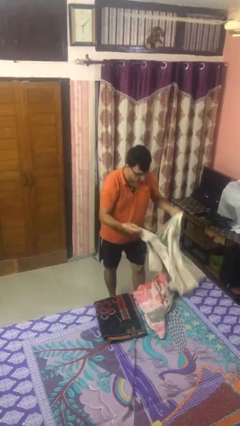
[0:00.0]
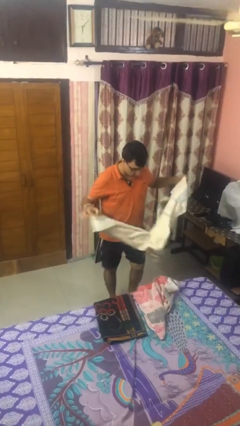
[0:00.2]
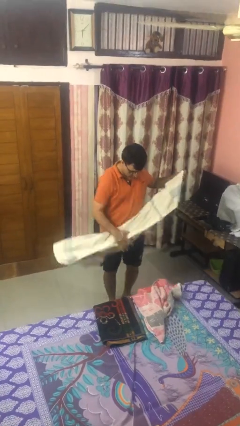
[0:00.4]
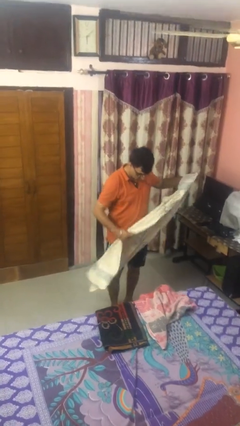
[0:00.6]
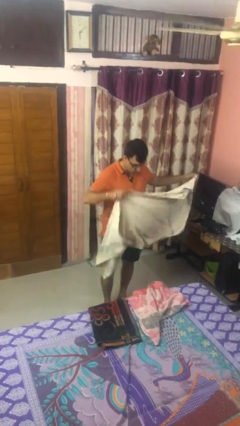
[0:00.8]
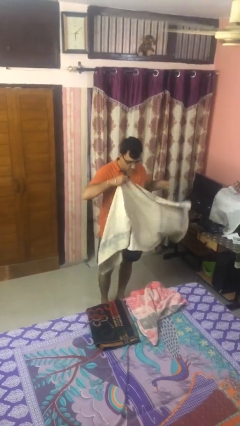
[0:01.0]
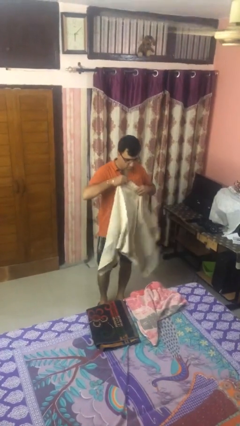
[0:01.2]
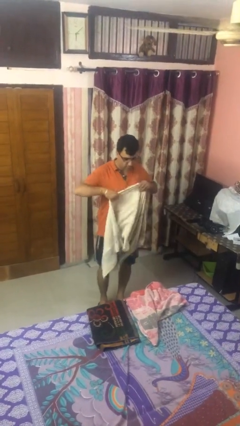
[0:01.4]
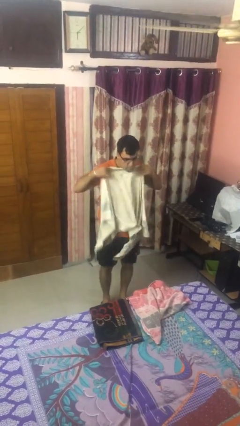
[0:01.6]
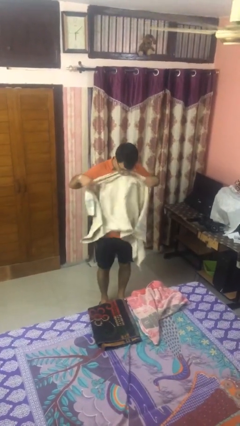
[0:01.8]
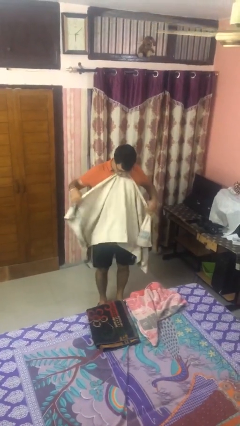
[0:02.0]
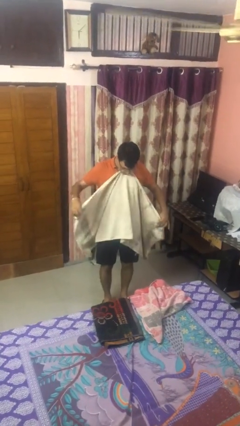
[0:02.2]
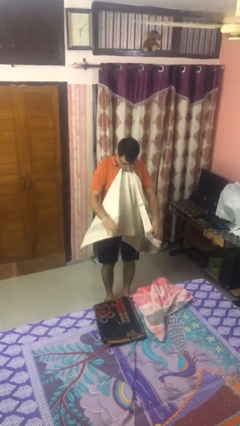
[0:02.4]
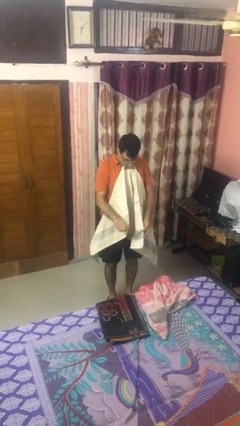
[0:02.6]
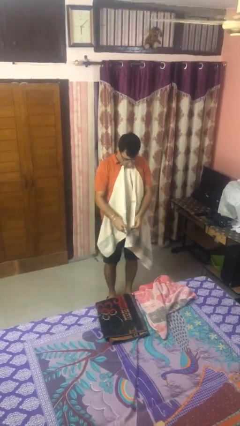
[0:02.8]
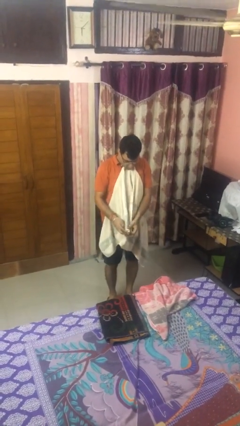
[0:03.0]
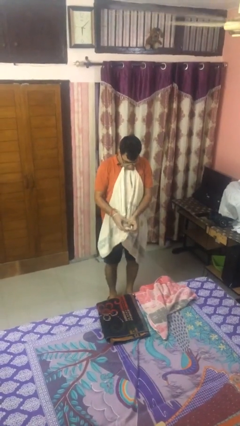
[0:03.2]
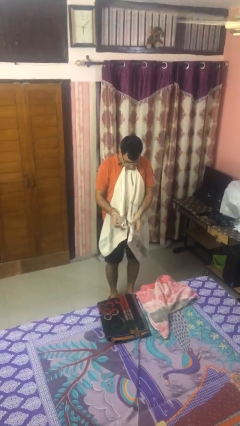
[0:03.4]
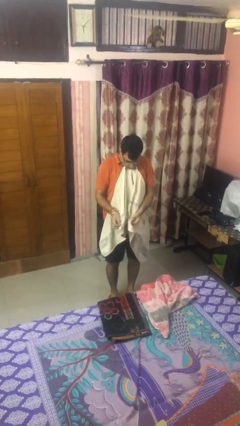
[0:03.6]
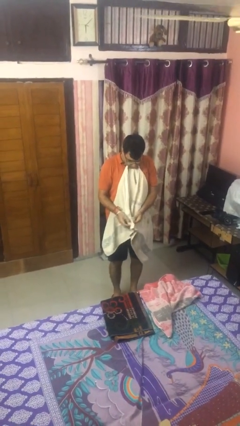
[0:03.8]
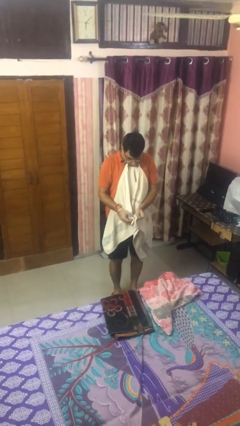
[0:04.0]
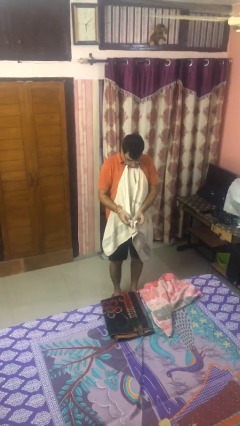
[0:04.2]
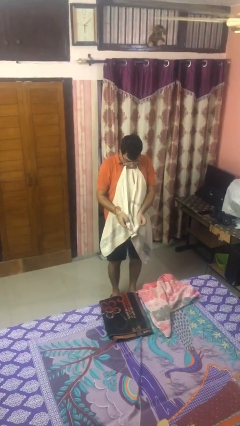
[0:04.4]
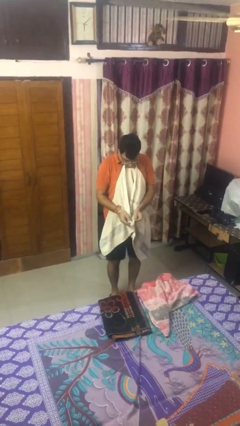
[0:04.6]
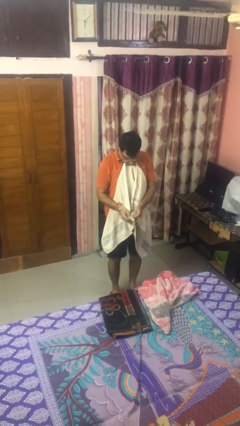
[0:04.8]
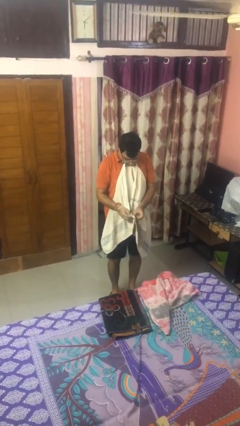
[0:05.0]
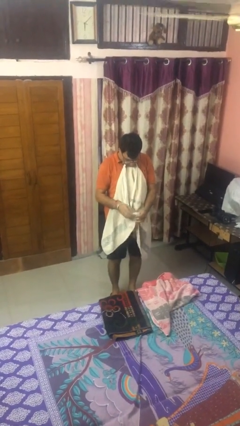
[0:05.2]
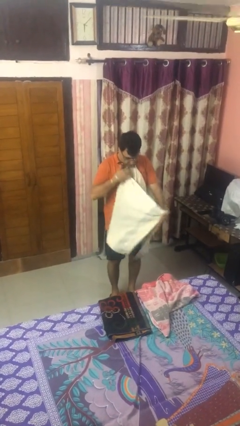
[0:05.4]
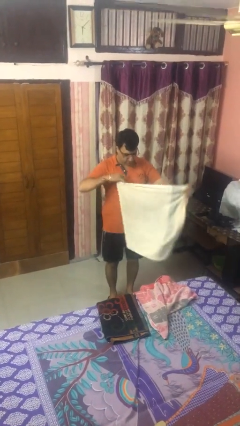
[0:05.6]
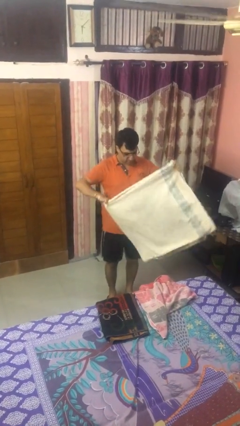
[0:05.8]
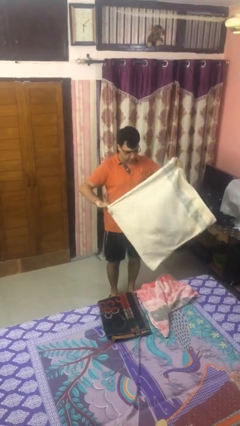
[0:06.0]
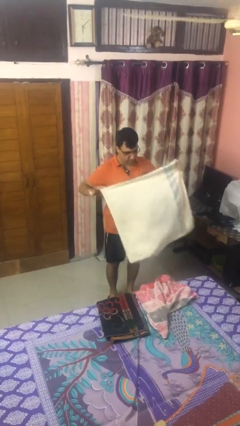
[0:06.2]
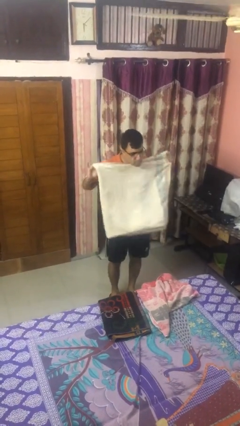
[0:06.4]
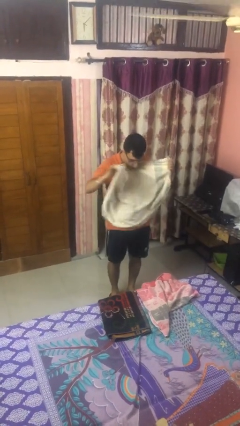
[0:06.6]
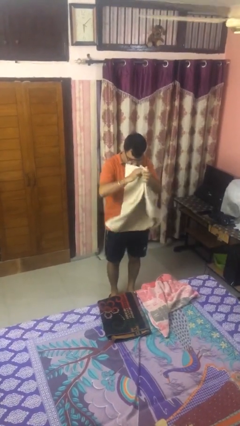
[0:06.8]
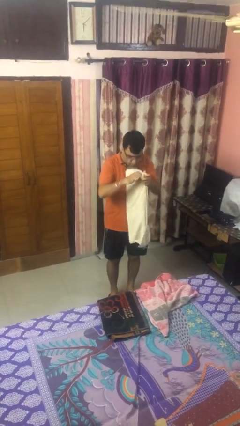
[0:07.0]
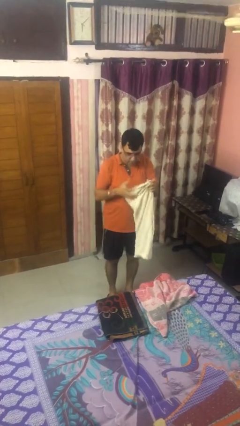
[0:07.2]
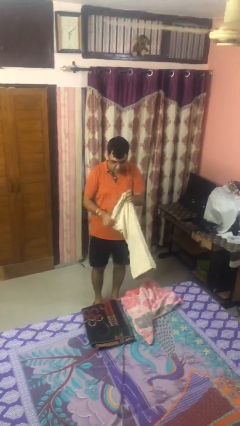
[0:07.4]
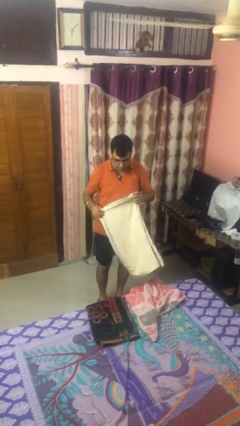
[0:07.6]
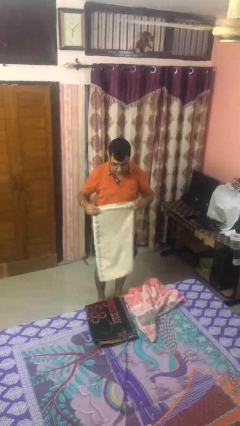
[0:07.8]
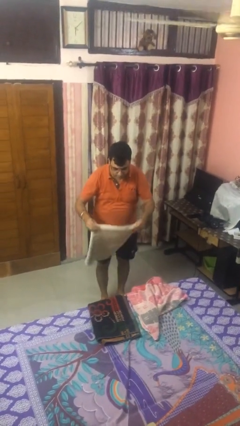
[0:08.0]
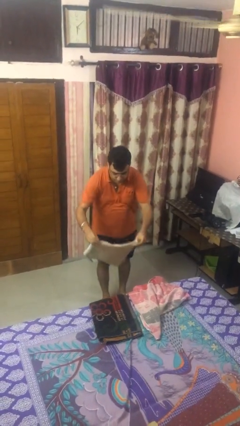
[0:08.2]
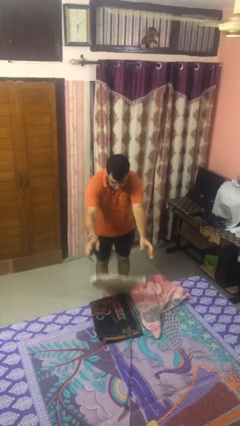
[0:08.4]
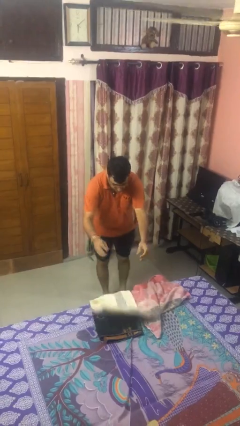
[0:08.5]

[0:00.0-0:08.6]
person folds towel

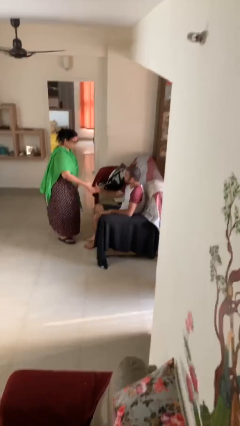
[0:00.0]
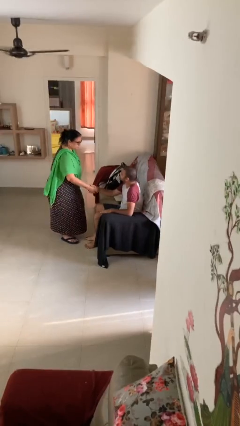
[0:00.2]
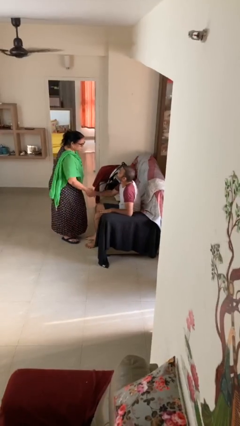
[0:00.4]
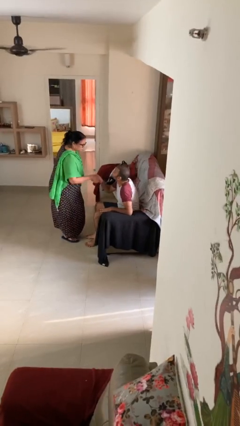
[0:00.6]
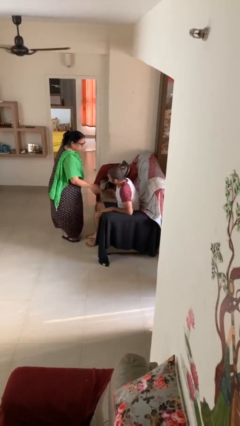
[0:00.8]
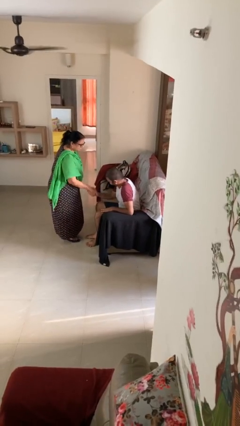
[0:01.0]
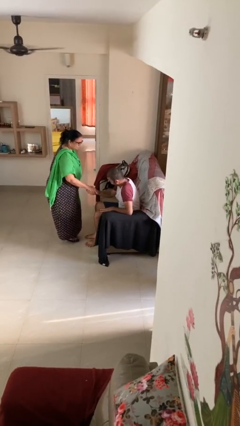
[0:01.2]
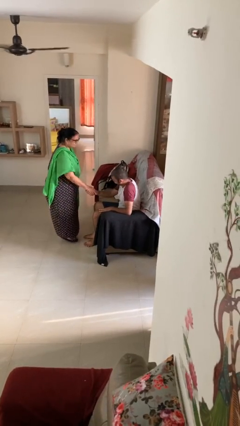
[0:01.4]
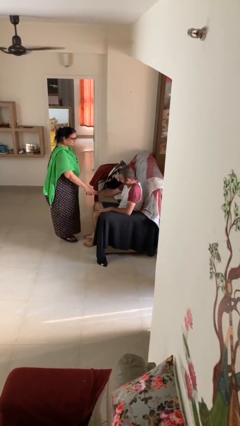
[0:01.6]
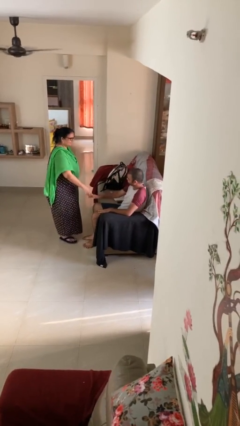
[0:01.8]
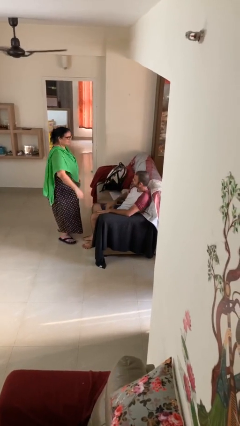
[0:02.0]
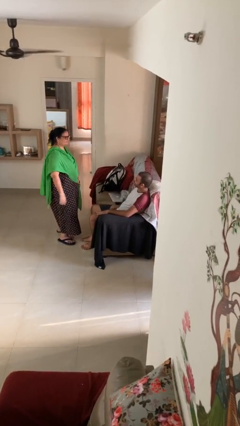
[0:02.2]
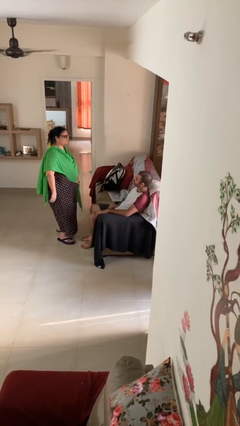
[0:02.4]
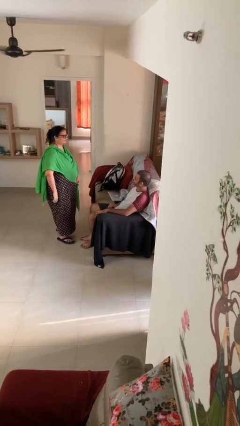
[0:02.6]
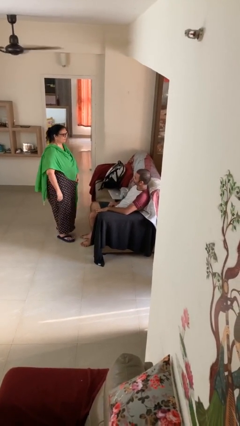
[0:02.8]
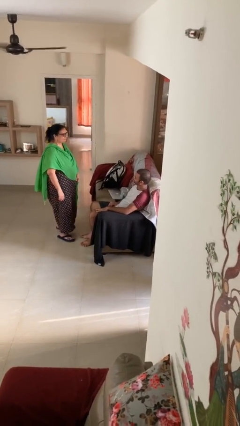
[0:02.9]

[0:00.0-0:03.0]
person shakes hand

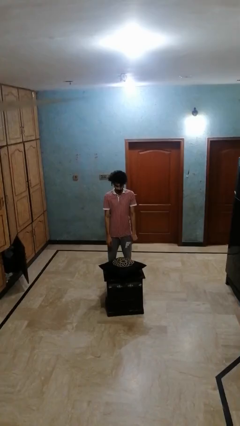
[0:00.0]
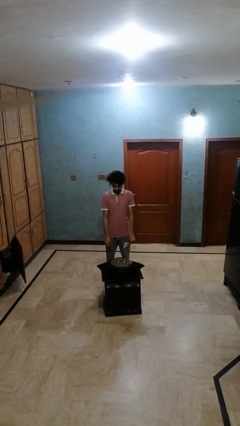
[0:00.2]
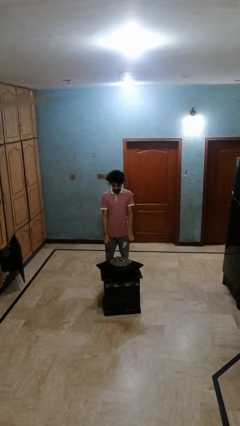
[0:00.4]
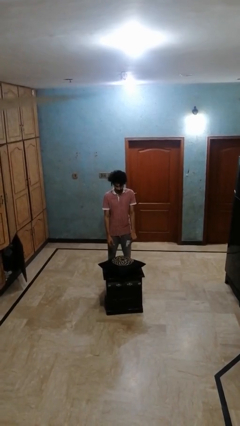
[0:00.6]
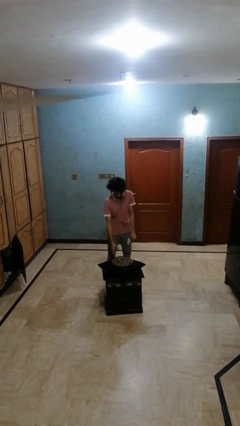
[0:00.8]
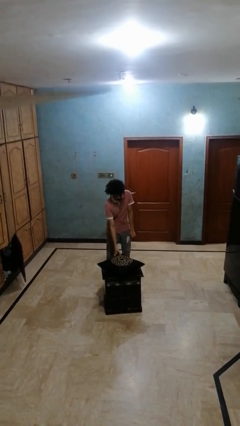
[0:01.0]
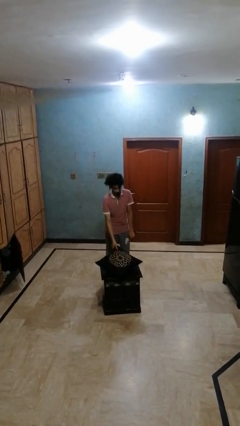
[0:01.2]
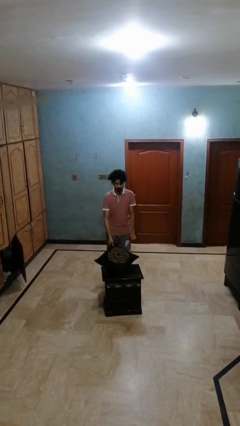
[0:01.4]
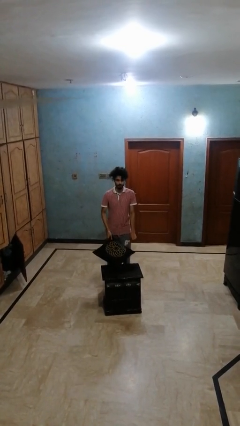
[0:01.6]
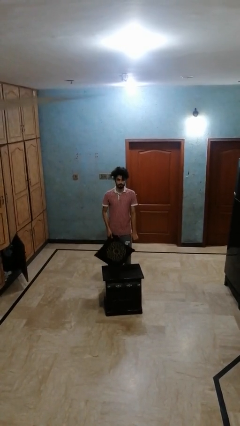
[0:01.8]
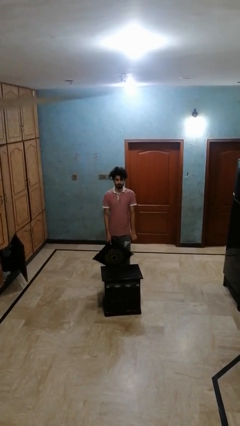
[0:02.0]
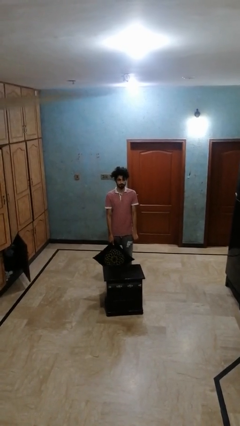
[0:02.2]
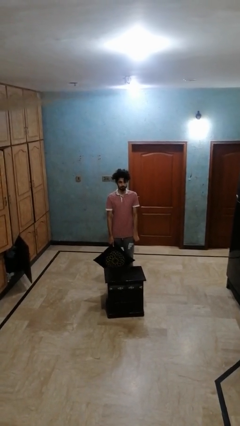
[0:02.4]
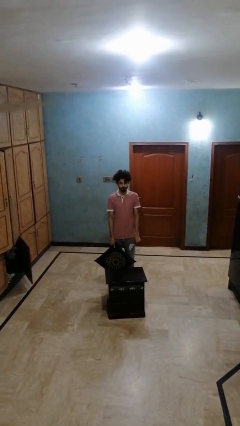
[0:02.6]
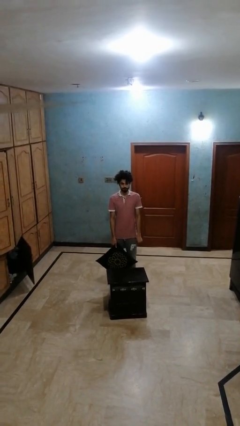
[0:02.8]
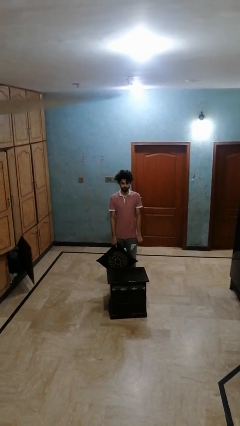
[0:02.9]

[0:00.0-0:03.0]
person picks up object from table

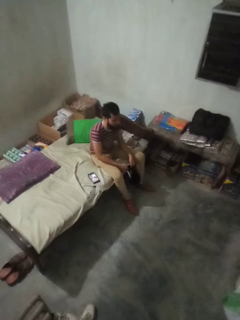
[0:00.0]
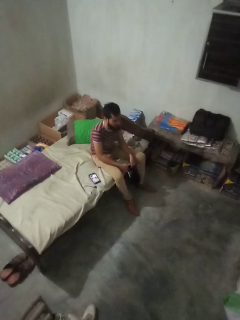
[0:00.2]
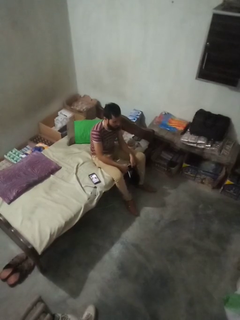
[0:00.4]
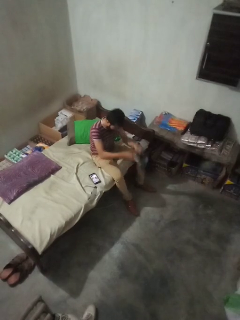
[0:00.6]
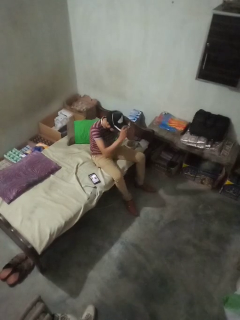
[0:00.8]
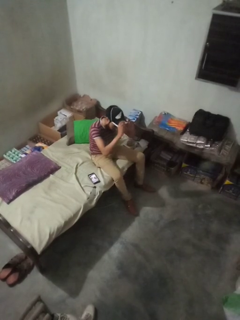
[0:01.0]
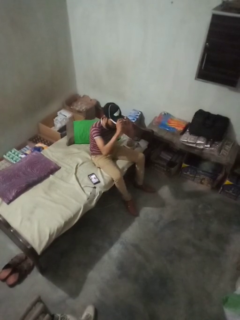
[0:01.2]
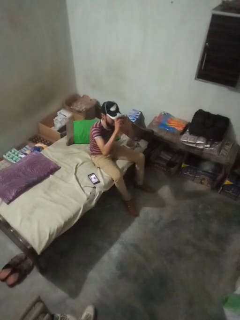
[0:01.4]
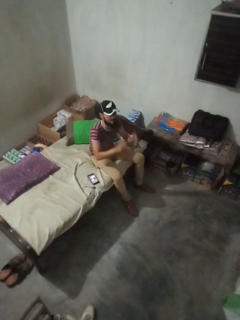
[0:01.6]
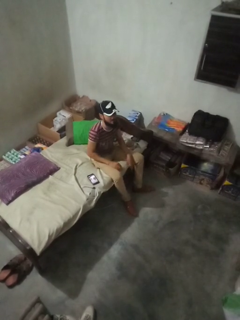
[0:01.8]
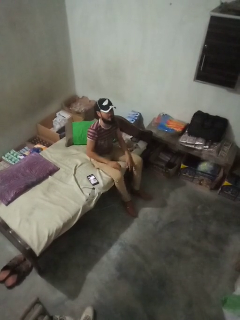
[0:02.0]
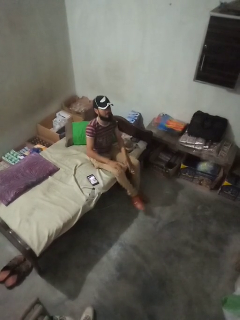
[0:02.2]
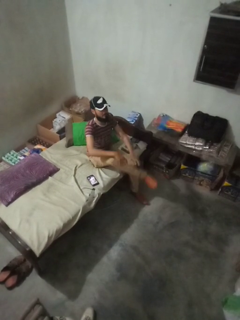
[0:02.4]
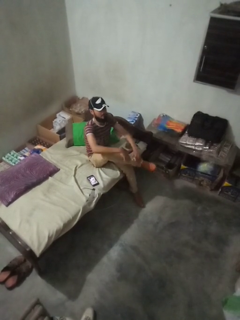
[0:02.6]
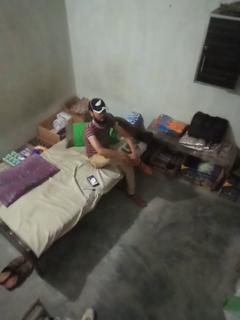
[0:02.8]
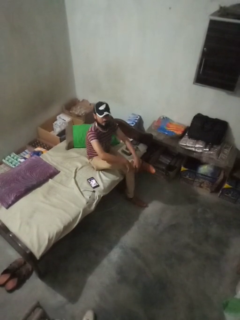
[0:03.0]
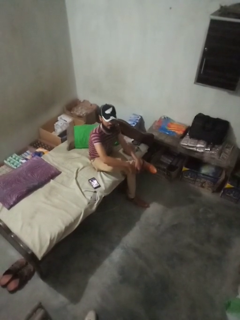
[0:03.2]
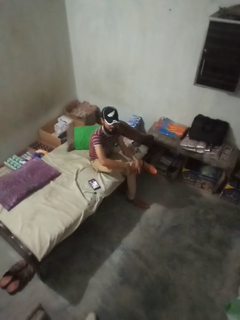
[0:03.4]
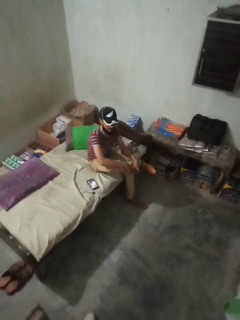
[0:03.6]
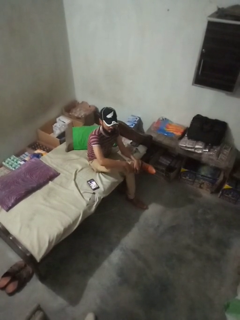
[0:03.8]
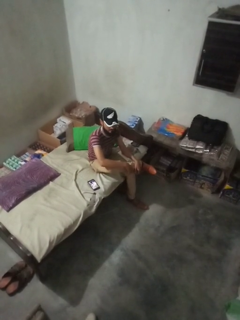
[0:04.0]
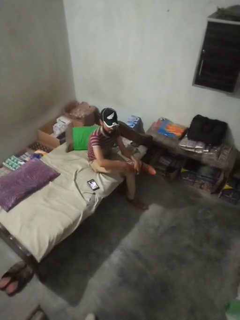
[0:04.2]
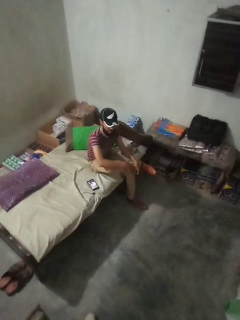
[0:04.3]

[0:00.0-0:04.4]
person puts on hat

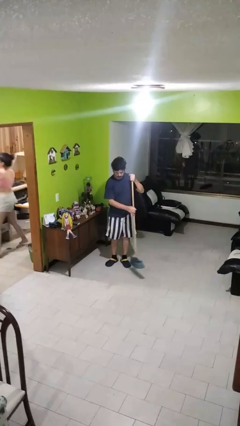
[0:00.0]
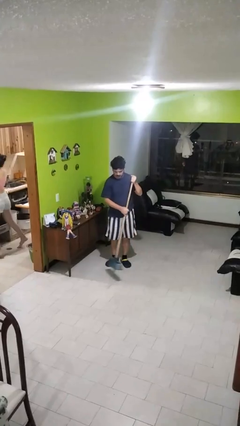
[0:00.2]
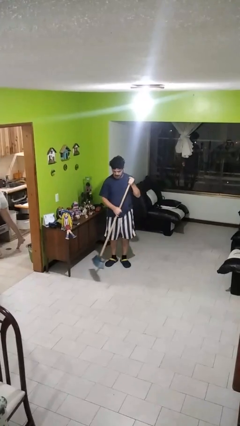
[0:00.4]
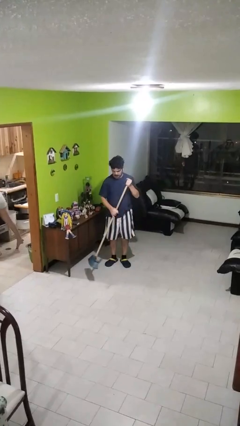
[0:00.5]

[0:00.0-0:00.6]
person sweeps floor
